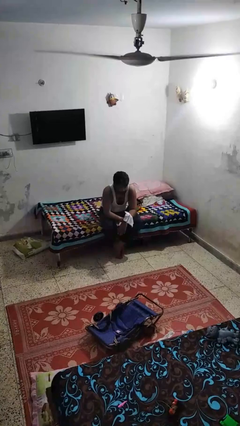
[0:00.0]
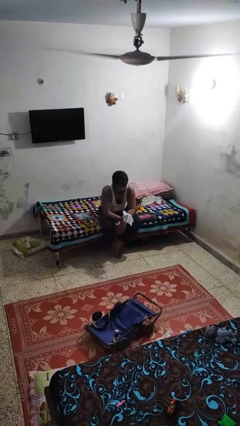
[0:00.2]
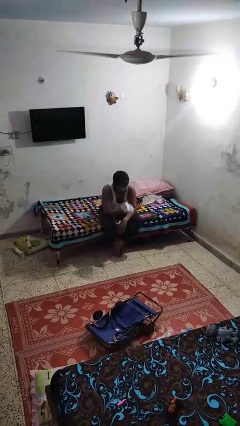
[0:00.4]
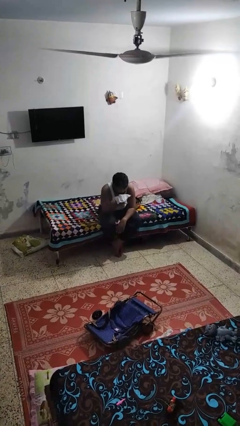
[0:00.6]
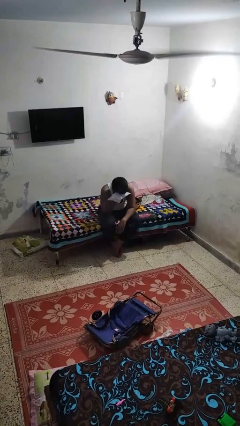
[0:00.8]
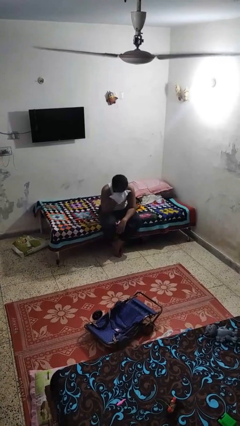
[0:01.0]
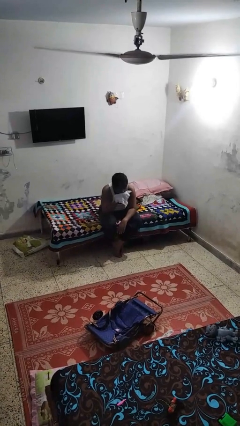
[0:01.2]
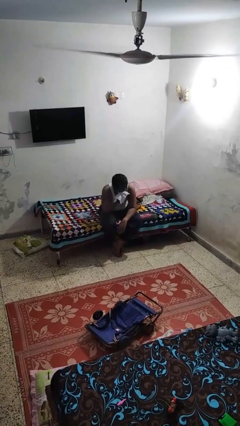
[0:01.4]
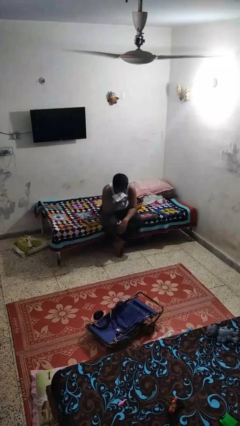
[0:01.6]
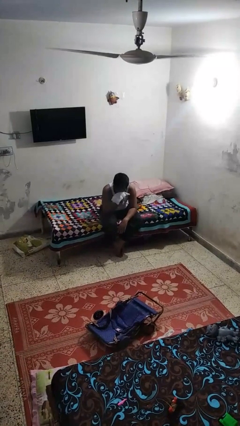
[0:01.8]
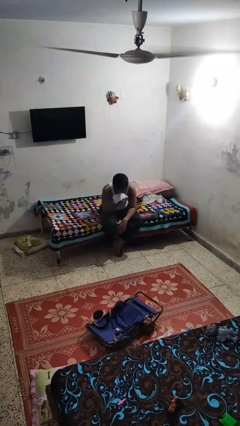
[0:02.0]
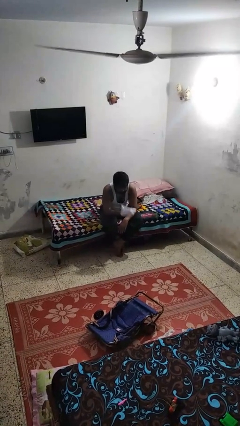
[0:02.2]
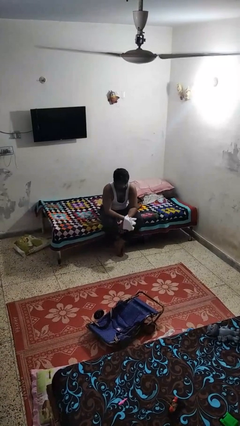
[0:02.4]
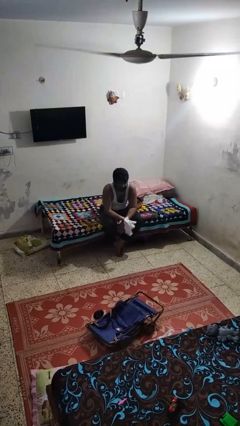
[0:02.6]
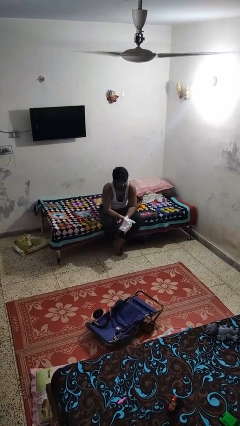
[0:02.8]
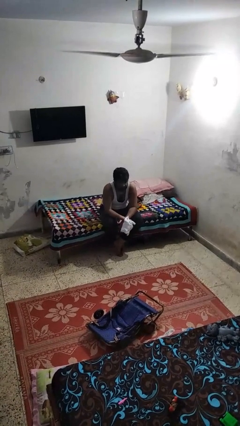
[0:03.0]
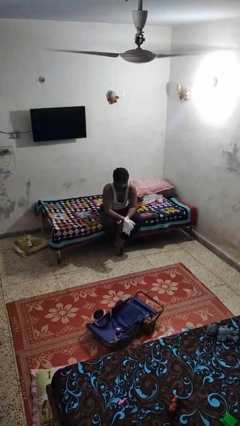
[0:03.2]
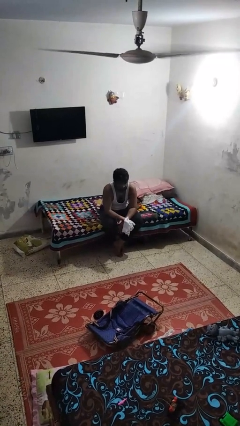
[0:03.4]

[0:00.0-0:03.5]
person wipes mouth with napkin

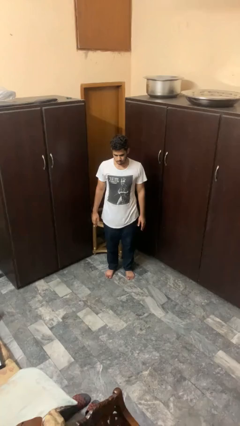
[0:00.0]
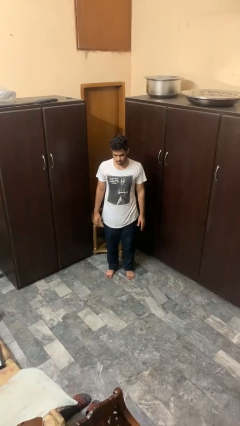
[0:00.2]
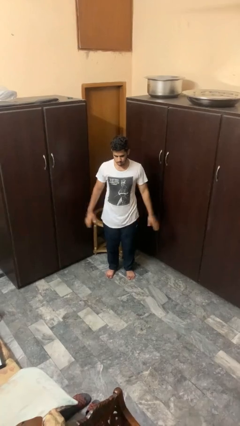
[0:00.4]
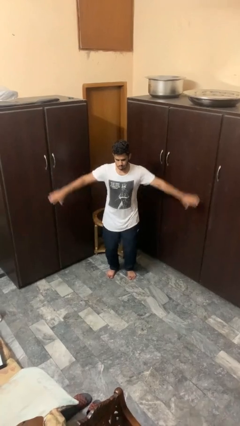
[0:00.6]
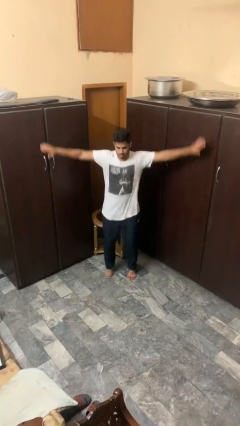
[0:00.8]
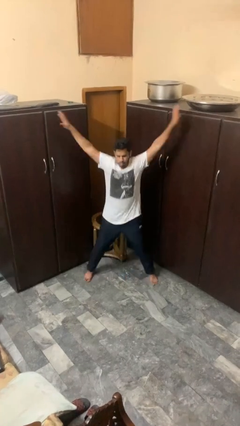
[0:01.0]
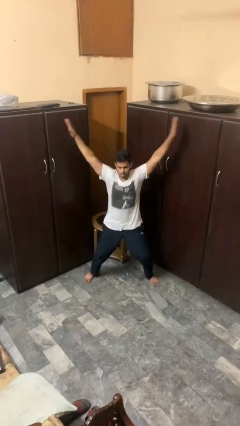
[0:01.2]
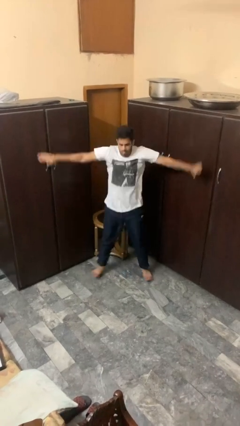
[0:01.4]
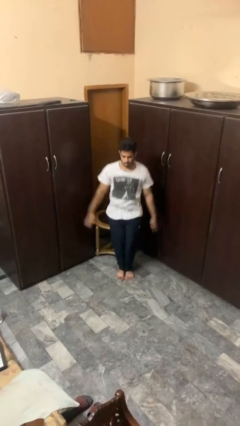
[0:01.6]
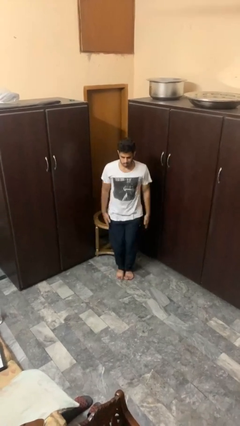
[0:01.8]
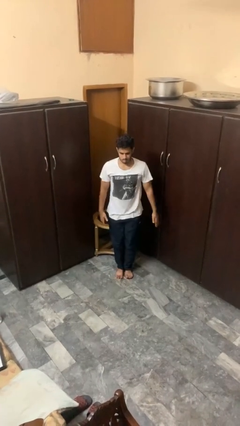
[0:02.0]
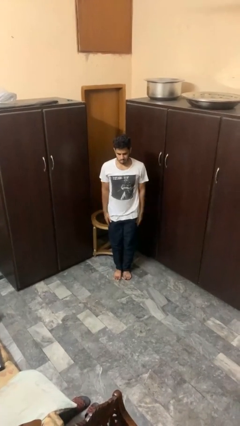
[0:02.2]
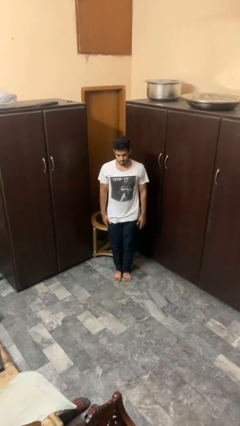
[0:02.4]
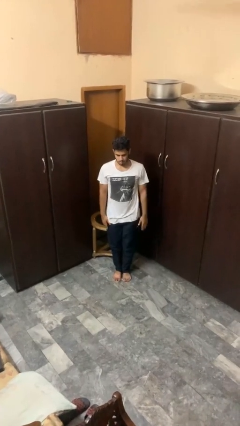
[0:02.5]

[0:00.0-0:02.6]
person exercises with jumping jacks

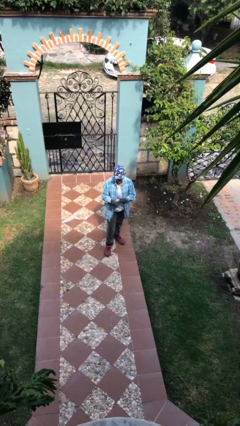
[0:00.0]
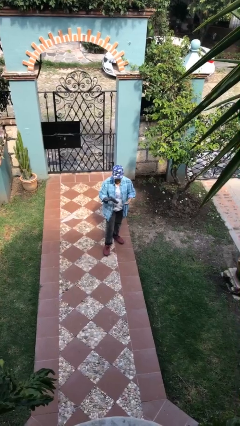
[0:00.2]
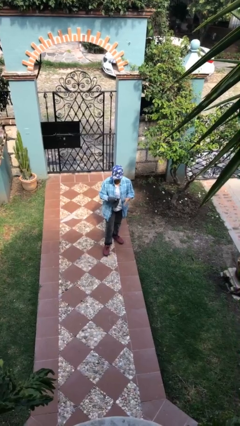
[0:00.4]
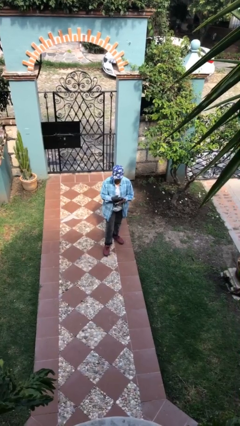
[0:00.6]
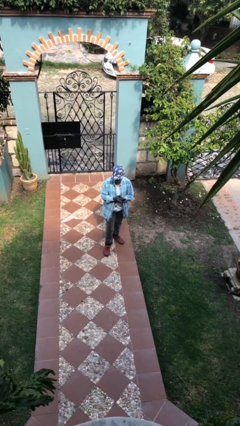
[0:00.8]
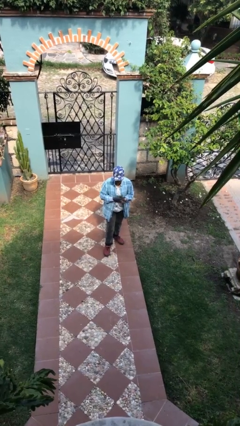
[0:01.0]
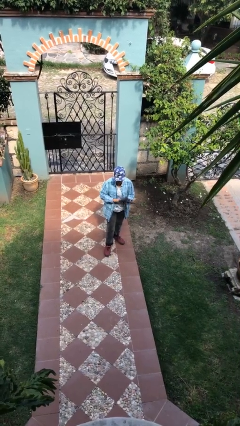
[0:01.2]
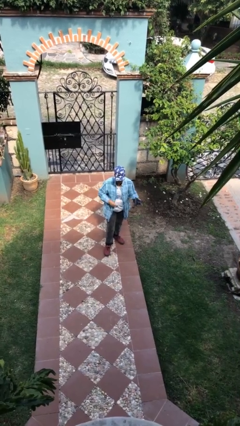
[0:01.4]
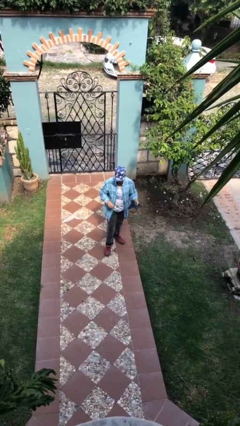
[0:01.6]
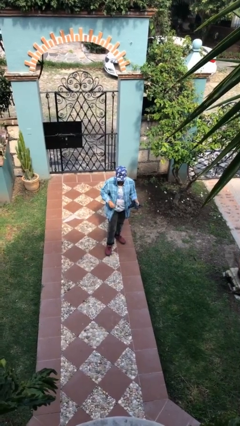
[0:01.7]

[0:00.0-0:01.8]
person takes off gloves

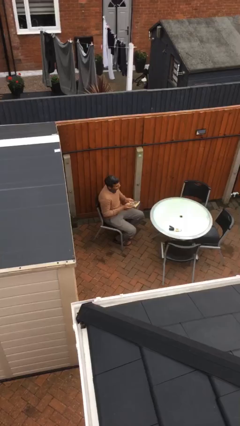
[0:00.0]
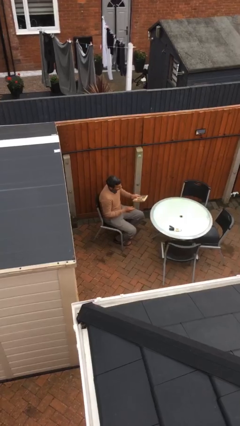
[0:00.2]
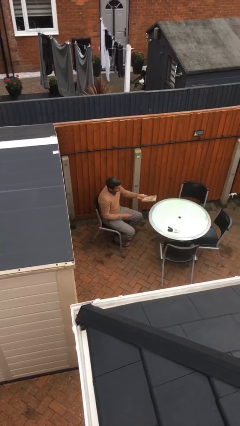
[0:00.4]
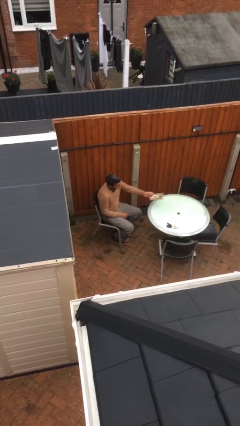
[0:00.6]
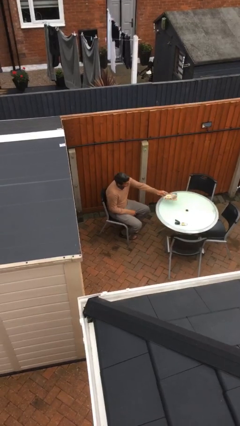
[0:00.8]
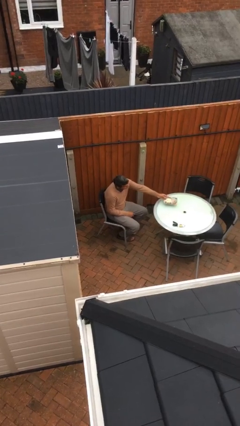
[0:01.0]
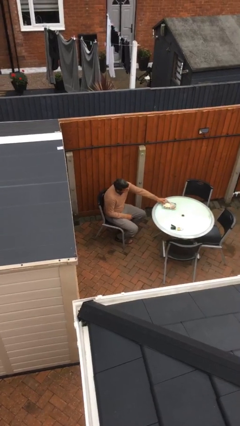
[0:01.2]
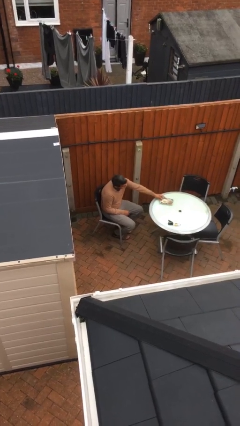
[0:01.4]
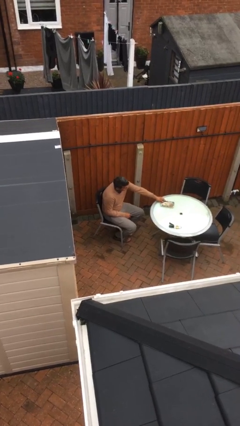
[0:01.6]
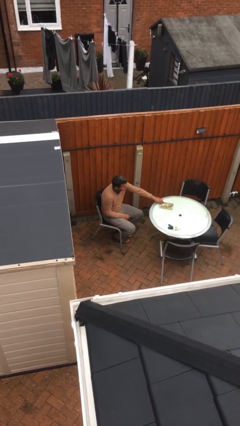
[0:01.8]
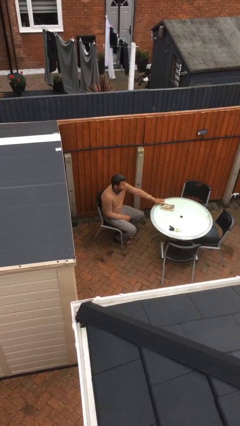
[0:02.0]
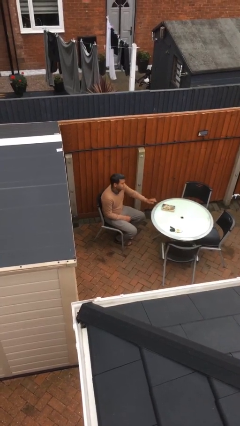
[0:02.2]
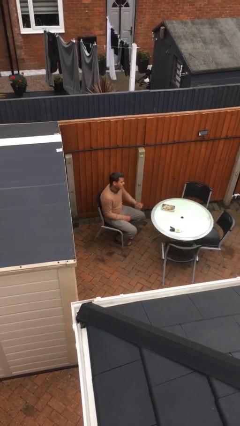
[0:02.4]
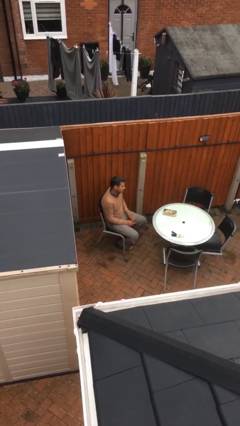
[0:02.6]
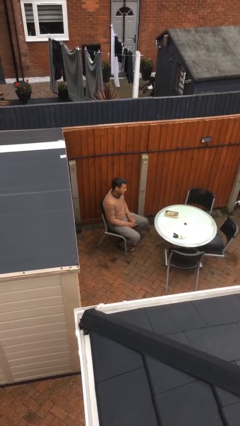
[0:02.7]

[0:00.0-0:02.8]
person puts down object on table

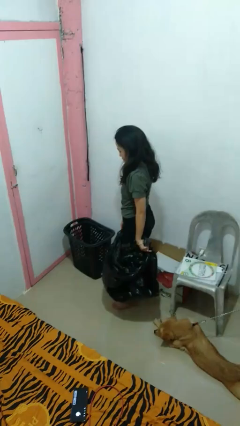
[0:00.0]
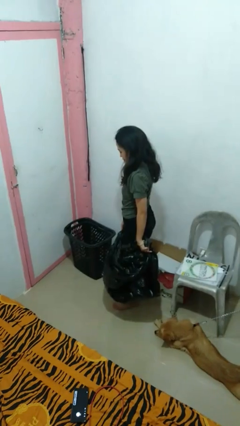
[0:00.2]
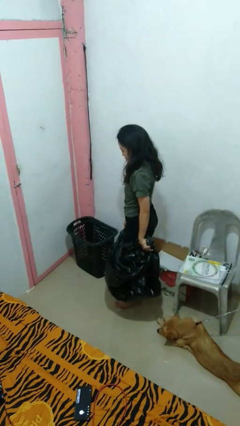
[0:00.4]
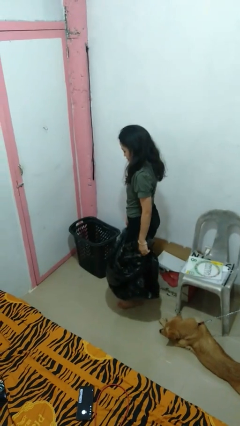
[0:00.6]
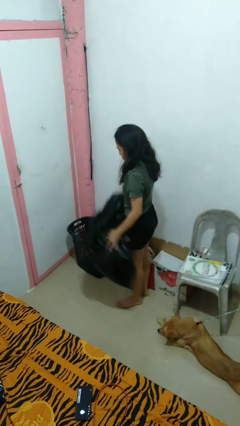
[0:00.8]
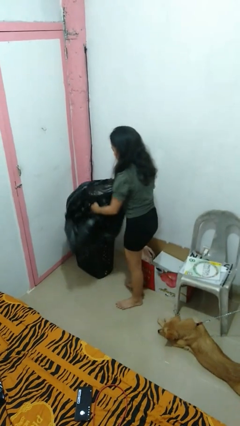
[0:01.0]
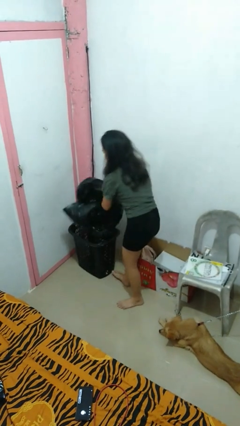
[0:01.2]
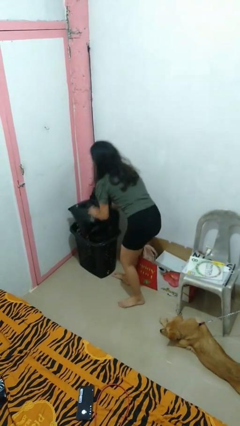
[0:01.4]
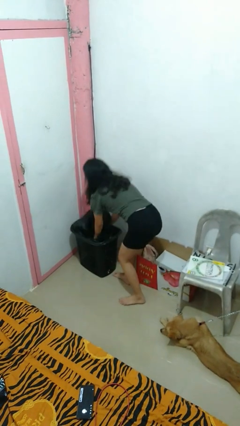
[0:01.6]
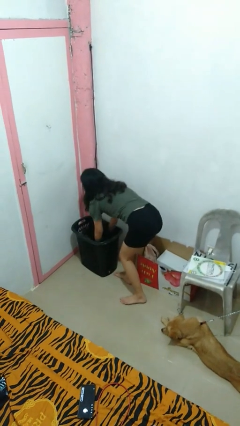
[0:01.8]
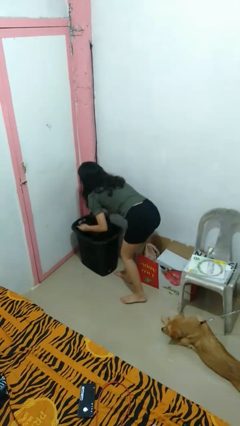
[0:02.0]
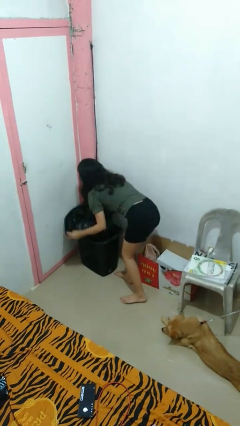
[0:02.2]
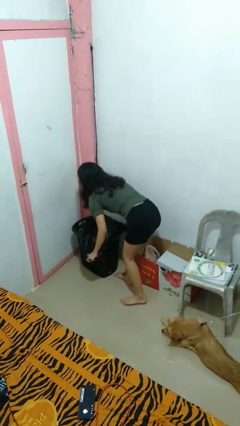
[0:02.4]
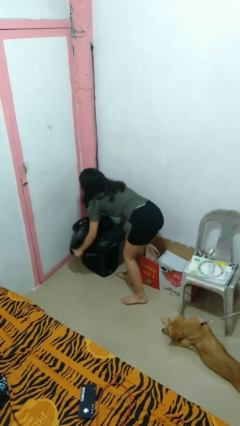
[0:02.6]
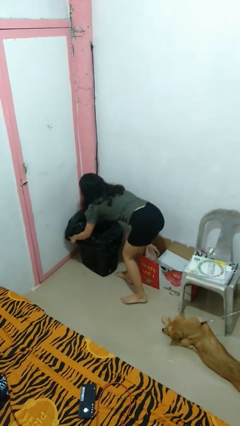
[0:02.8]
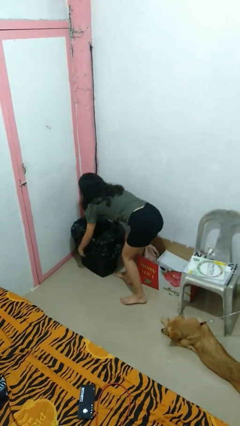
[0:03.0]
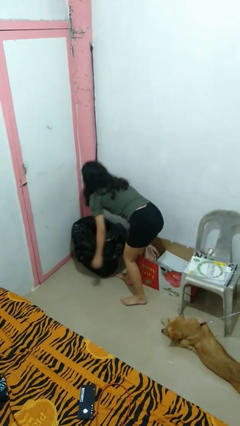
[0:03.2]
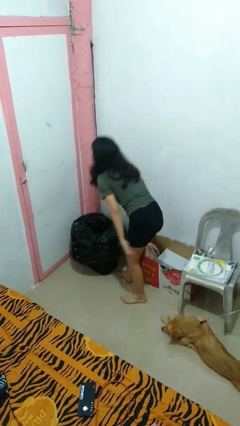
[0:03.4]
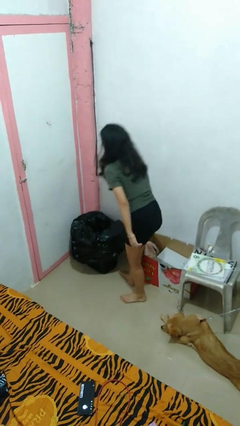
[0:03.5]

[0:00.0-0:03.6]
person inserts trashbag into trashcan

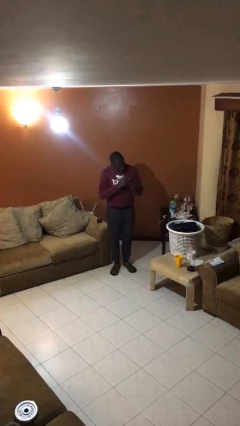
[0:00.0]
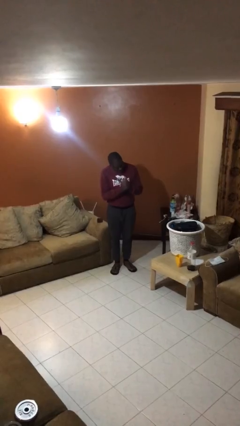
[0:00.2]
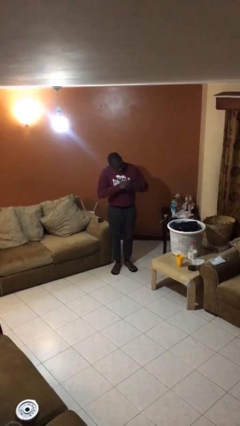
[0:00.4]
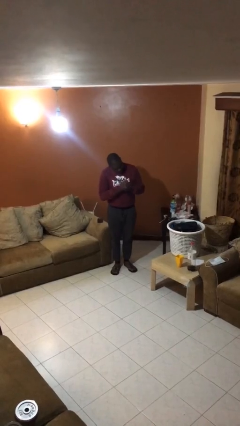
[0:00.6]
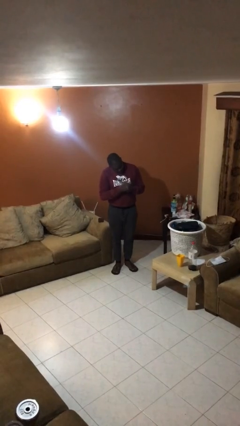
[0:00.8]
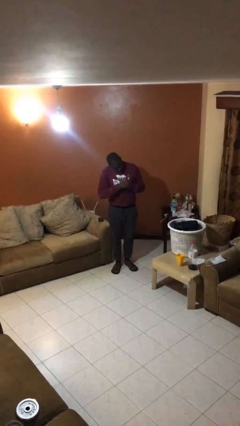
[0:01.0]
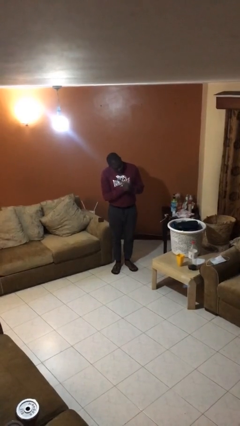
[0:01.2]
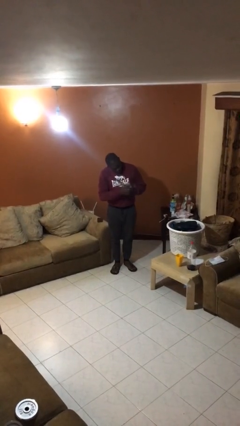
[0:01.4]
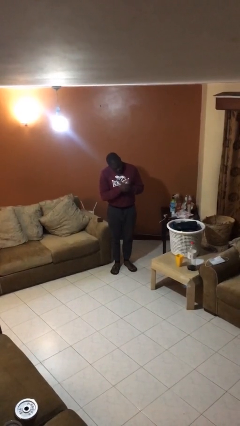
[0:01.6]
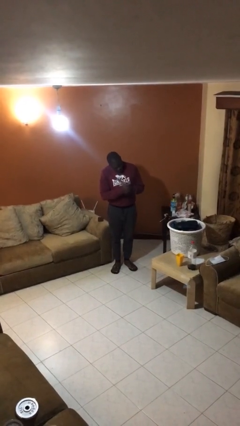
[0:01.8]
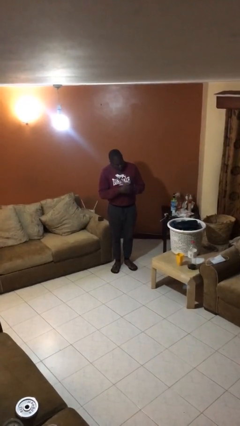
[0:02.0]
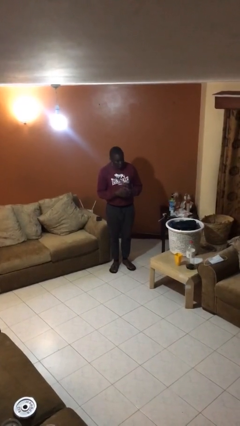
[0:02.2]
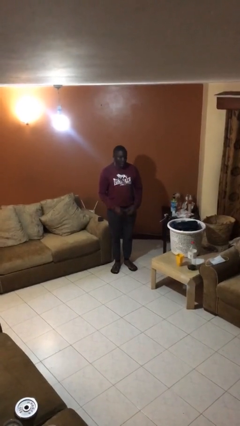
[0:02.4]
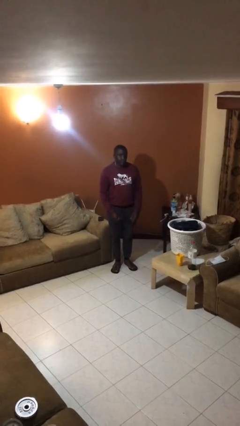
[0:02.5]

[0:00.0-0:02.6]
person cracks knuckles
